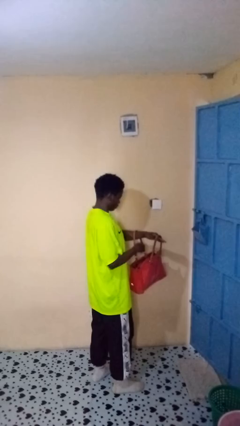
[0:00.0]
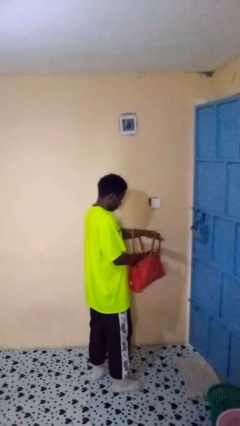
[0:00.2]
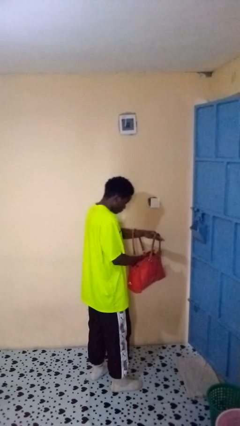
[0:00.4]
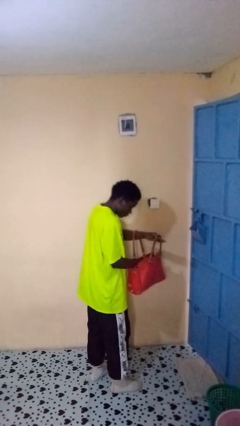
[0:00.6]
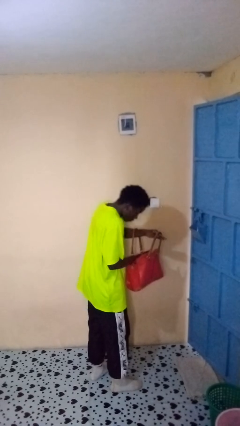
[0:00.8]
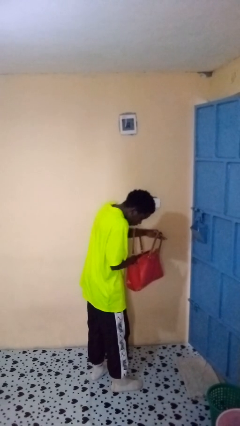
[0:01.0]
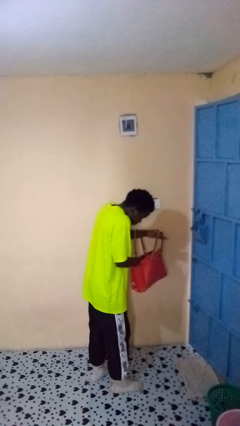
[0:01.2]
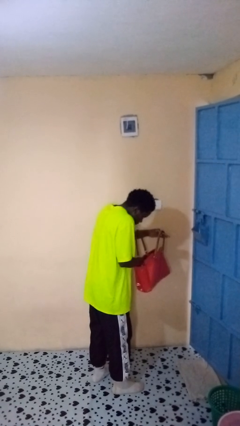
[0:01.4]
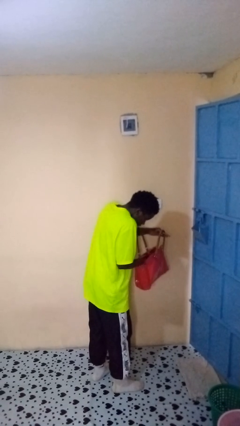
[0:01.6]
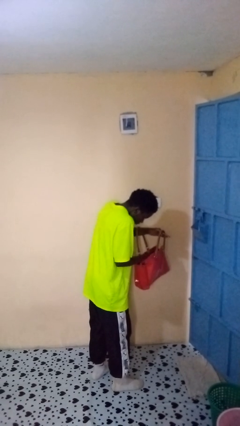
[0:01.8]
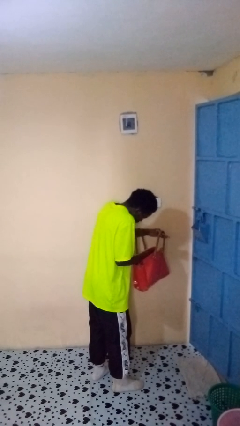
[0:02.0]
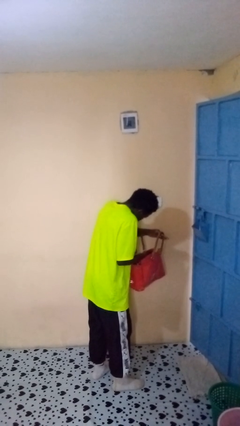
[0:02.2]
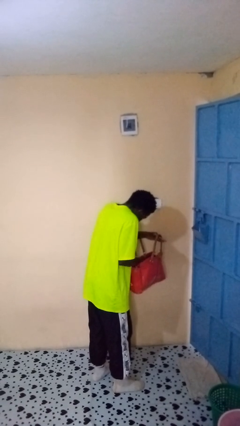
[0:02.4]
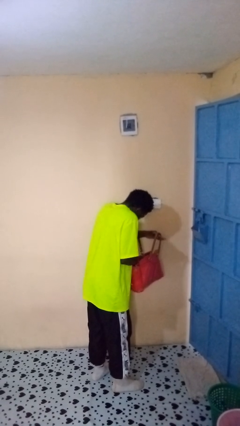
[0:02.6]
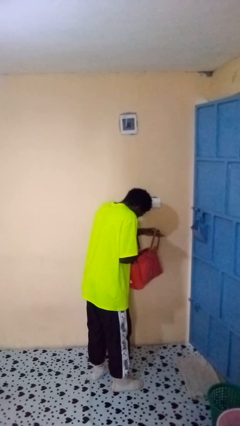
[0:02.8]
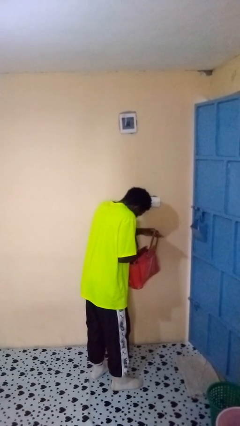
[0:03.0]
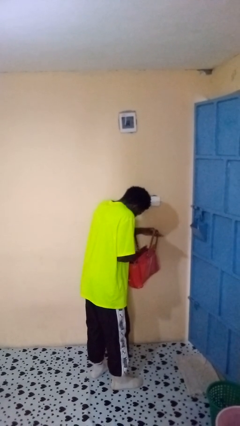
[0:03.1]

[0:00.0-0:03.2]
person searches in purse

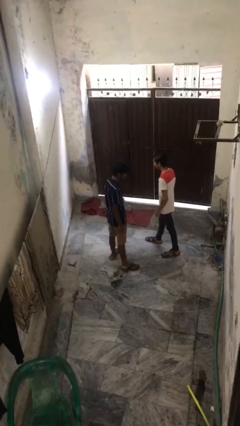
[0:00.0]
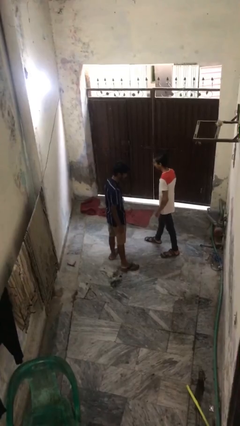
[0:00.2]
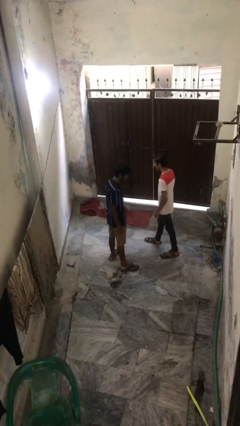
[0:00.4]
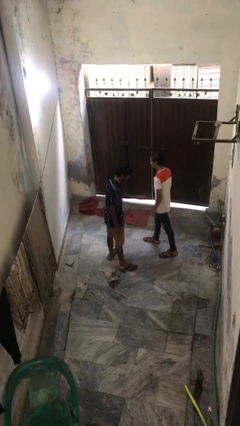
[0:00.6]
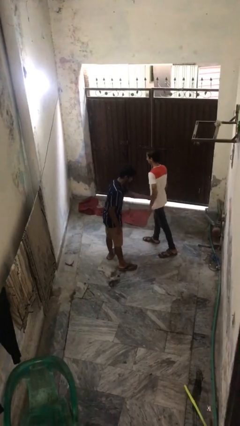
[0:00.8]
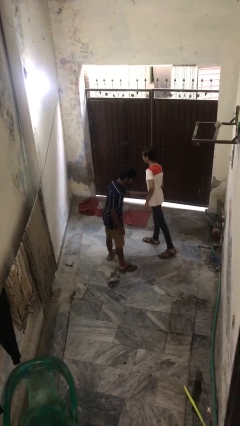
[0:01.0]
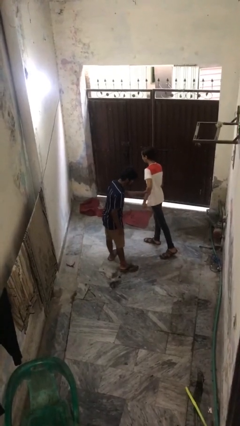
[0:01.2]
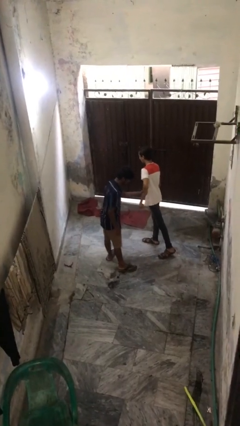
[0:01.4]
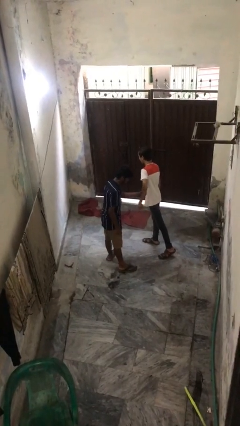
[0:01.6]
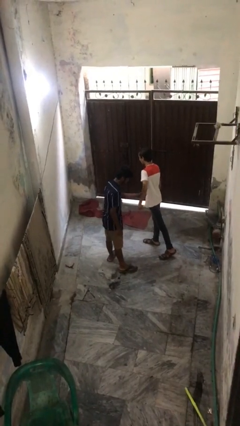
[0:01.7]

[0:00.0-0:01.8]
person grabs person by forearm

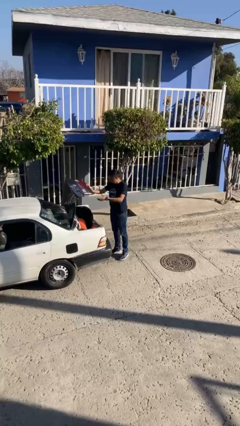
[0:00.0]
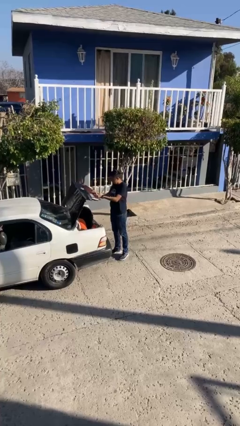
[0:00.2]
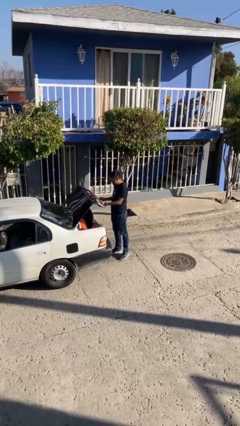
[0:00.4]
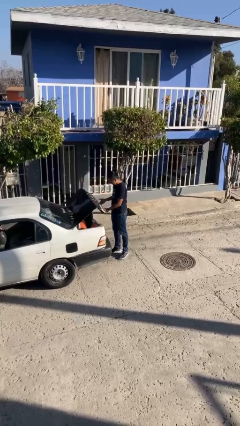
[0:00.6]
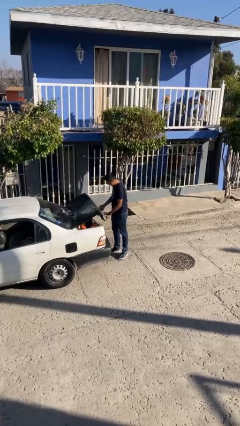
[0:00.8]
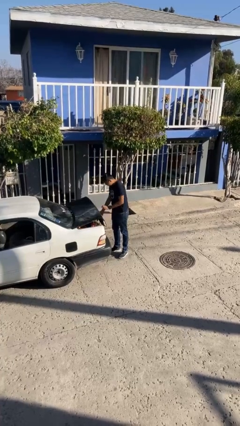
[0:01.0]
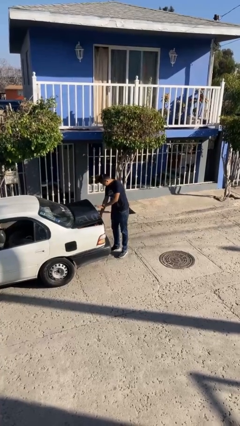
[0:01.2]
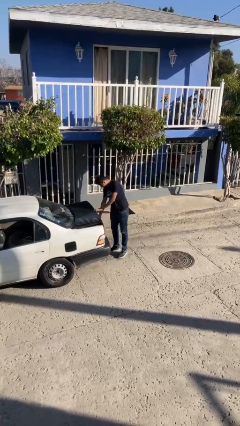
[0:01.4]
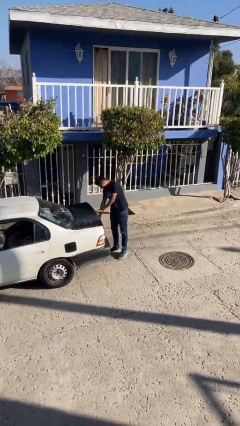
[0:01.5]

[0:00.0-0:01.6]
person closes car trunk

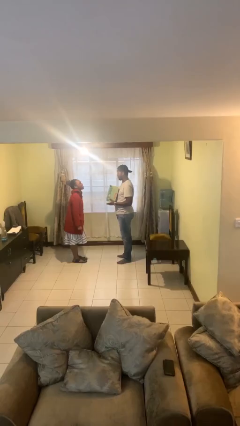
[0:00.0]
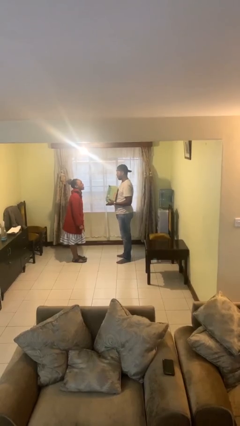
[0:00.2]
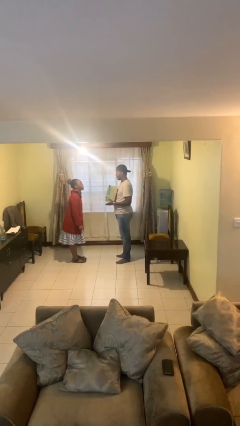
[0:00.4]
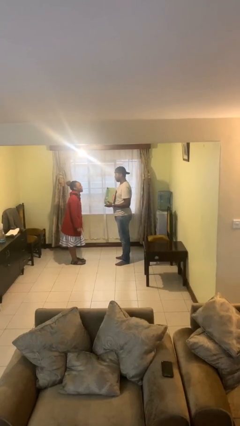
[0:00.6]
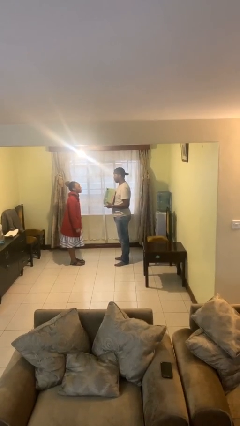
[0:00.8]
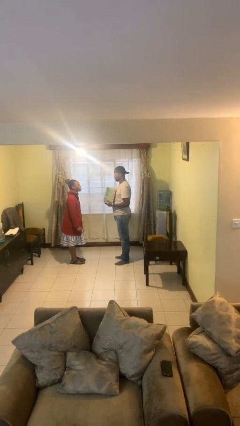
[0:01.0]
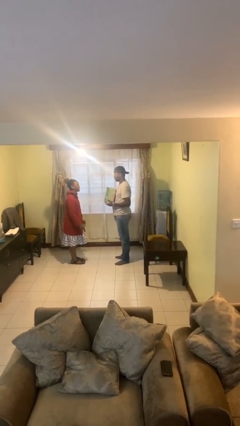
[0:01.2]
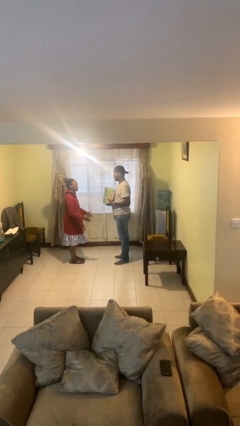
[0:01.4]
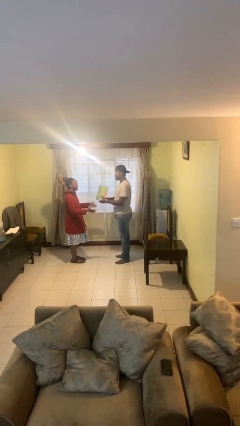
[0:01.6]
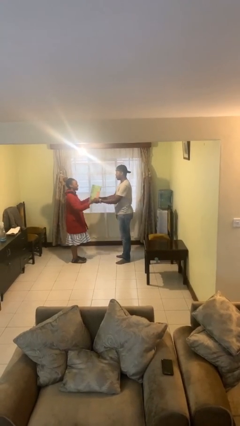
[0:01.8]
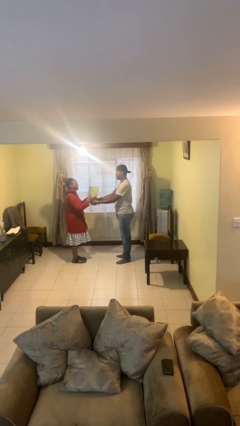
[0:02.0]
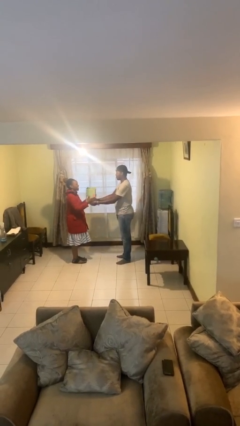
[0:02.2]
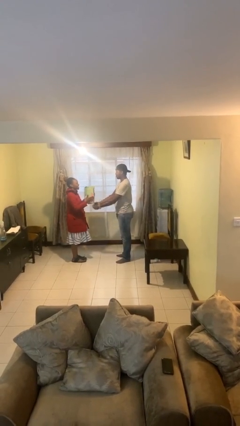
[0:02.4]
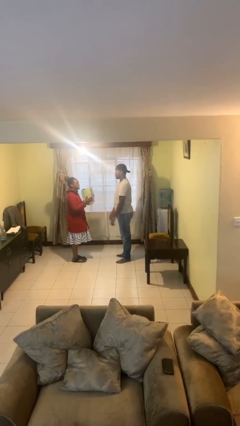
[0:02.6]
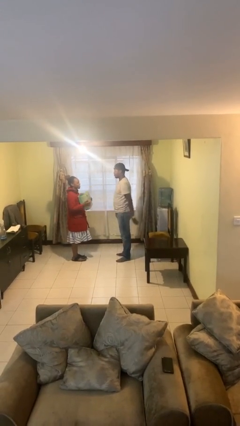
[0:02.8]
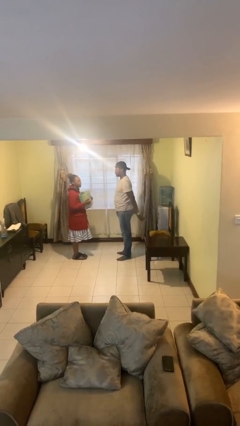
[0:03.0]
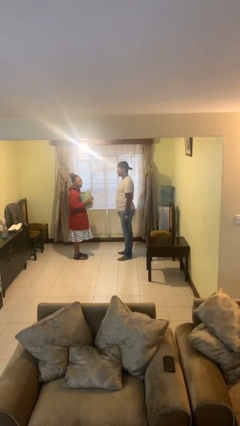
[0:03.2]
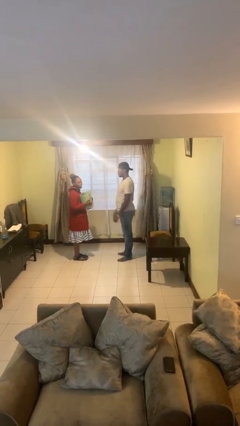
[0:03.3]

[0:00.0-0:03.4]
person transfers object to person

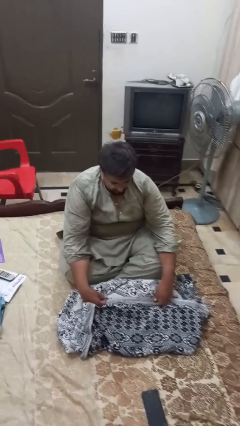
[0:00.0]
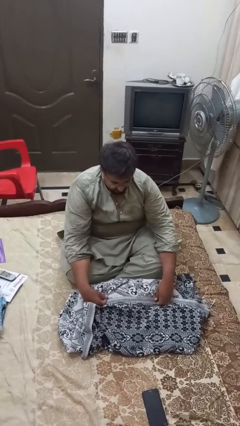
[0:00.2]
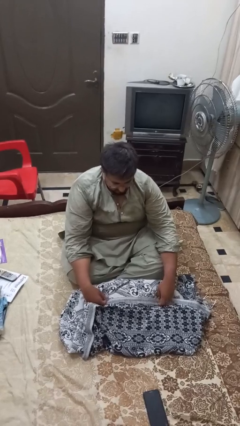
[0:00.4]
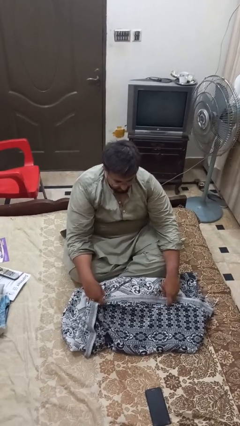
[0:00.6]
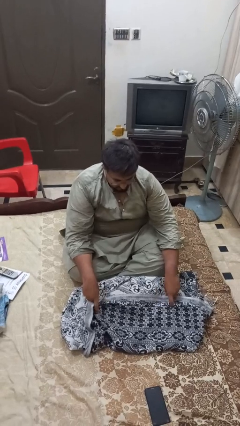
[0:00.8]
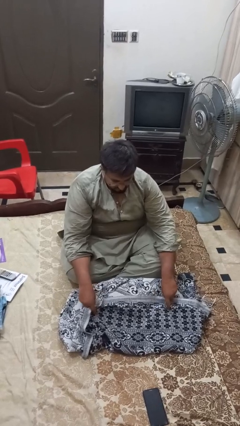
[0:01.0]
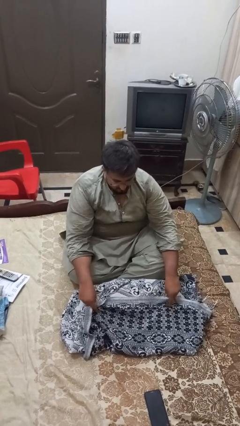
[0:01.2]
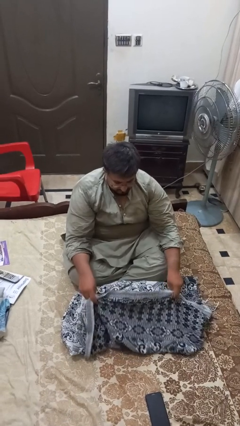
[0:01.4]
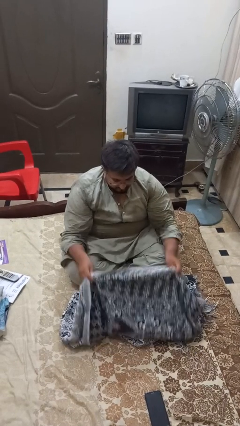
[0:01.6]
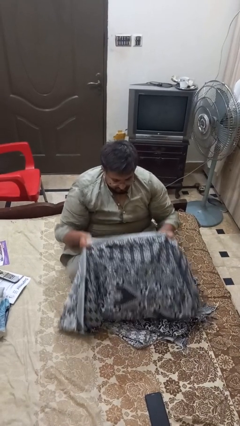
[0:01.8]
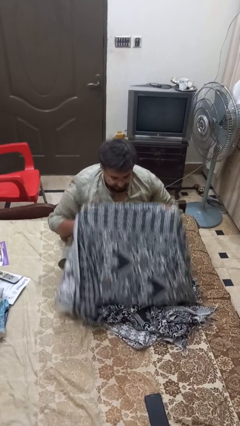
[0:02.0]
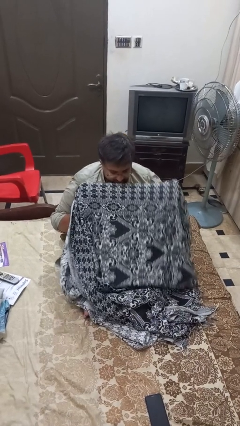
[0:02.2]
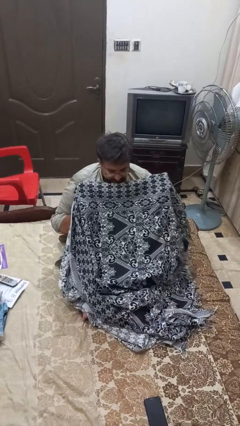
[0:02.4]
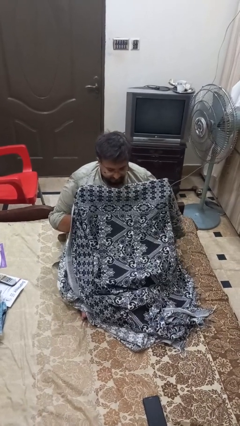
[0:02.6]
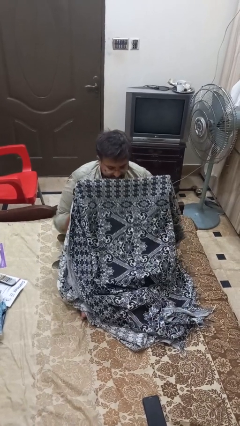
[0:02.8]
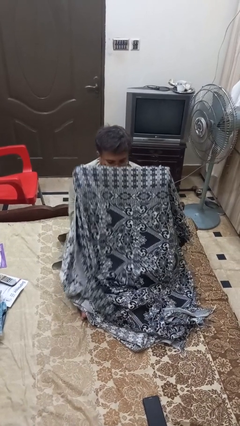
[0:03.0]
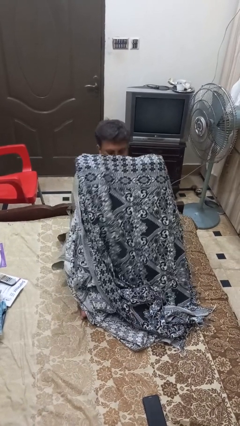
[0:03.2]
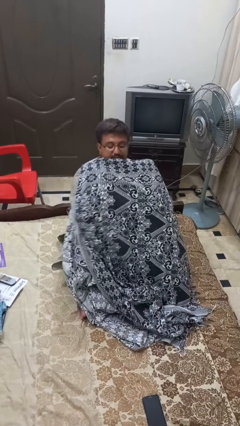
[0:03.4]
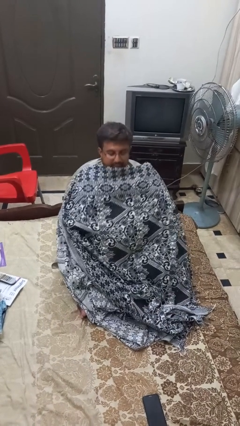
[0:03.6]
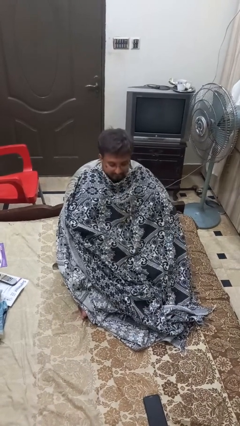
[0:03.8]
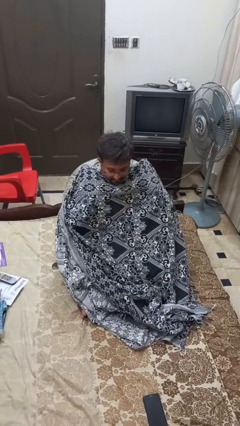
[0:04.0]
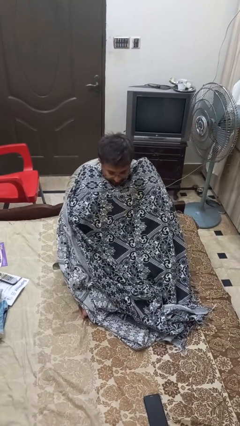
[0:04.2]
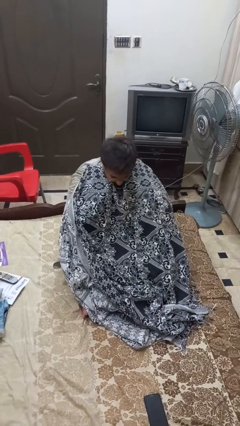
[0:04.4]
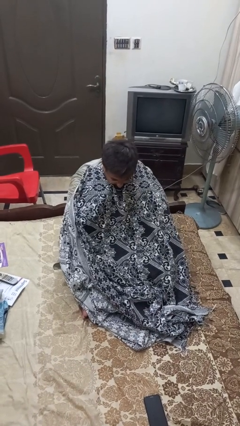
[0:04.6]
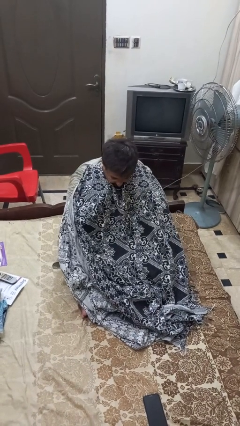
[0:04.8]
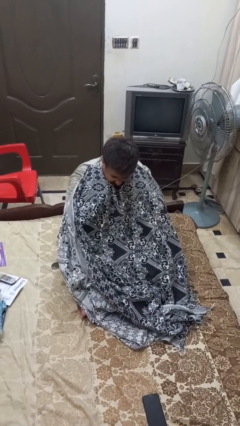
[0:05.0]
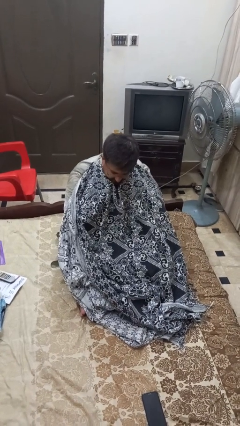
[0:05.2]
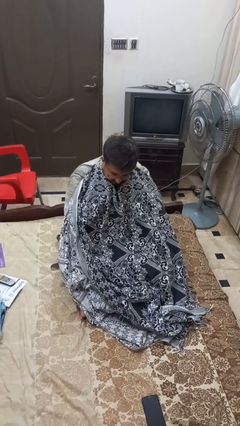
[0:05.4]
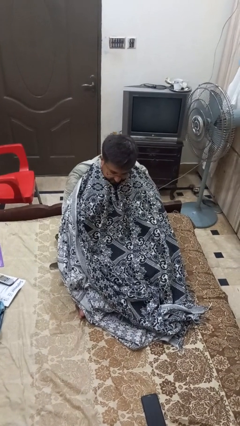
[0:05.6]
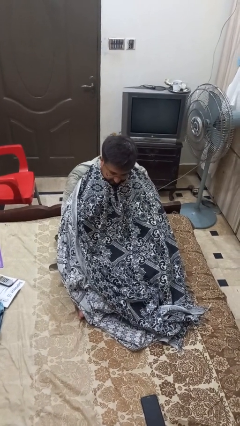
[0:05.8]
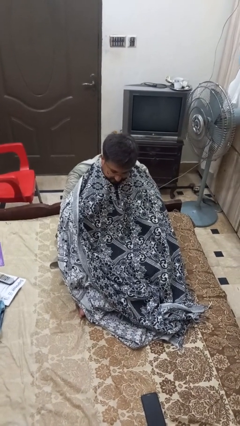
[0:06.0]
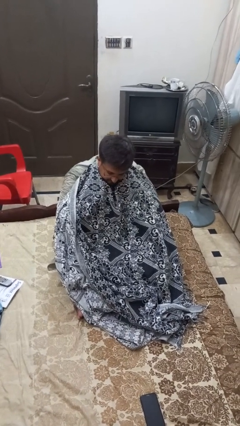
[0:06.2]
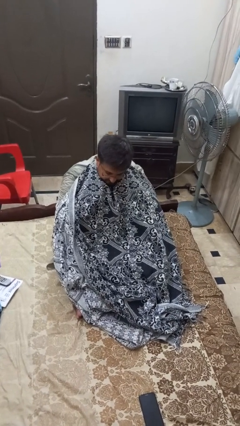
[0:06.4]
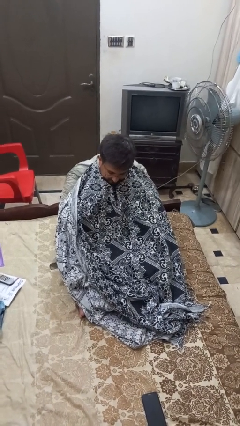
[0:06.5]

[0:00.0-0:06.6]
person covers with blanket

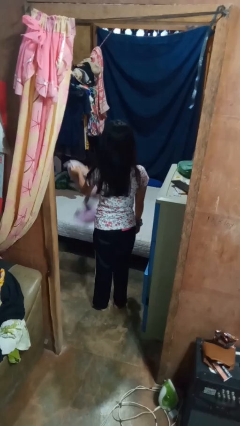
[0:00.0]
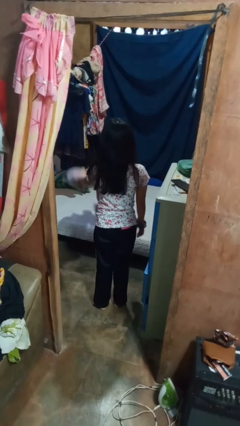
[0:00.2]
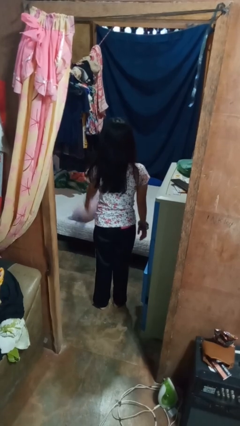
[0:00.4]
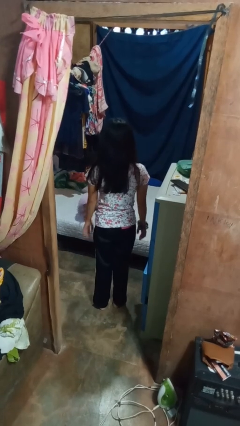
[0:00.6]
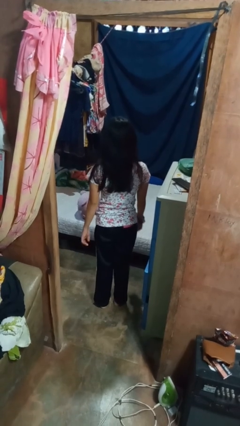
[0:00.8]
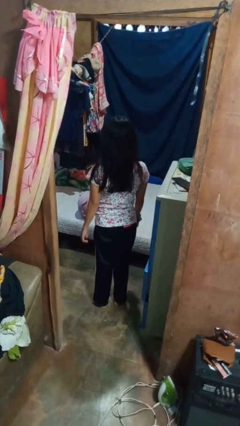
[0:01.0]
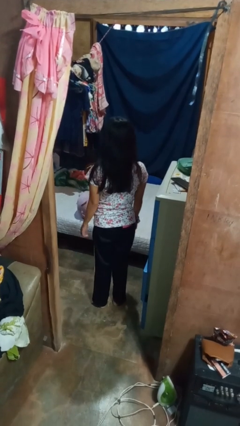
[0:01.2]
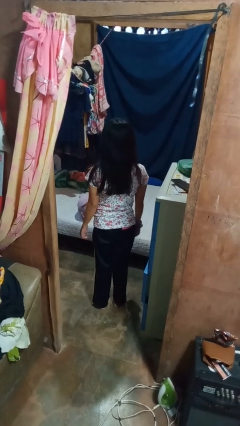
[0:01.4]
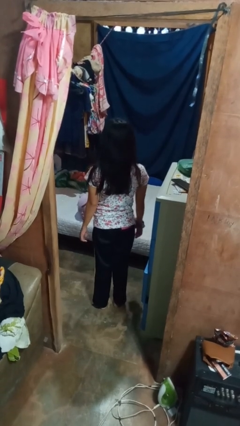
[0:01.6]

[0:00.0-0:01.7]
person throws object on bed
